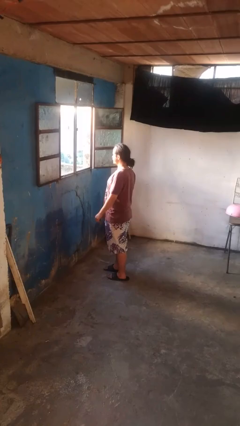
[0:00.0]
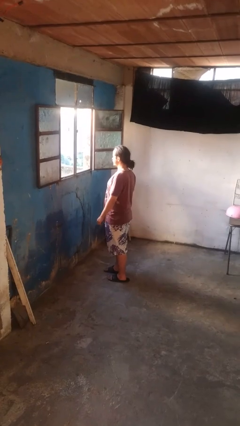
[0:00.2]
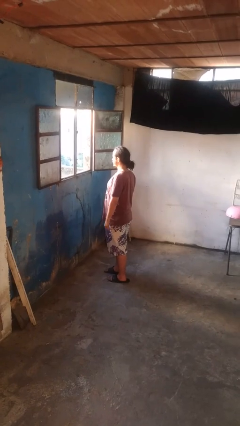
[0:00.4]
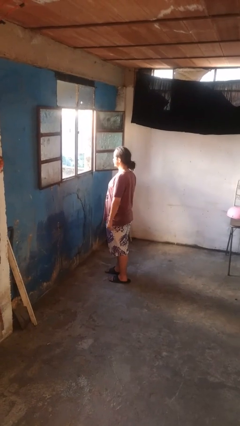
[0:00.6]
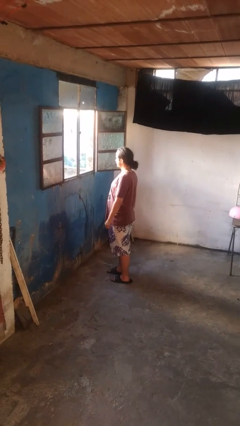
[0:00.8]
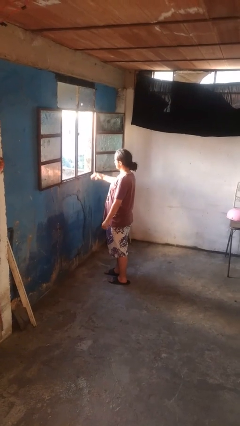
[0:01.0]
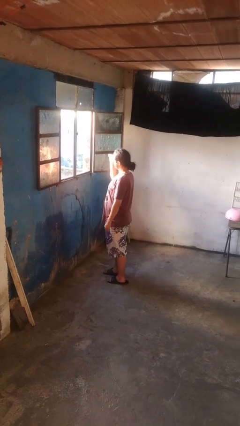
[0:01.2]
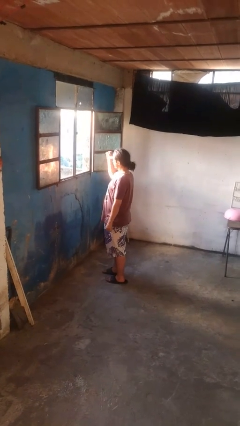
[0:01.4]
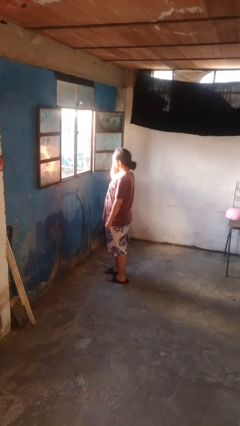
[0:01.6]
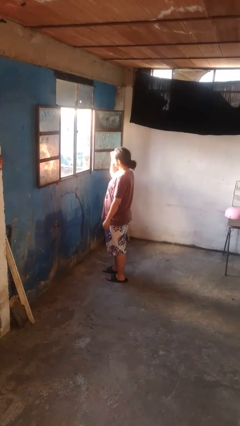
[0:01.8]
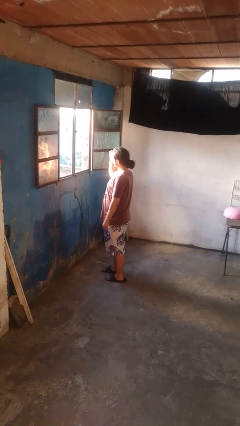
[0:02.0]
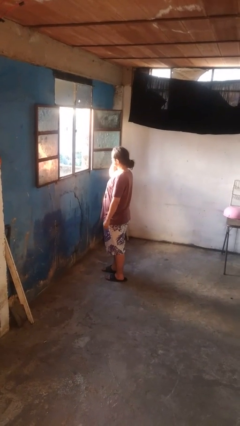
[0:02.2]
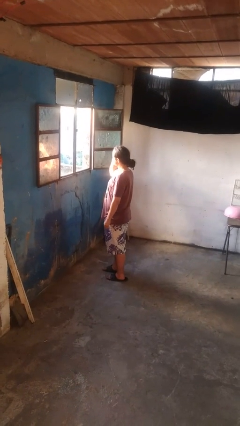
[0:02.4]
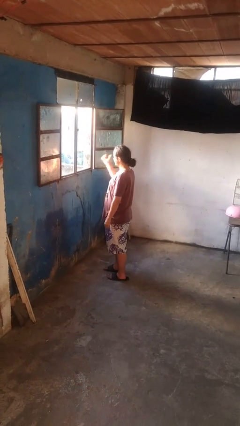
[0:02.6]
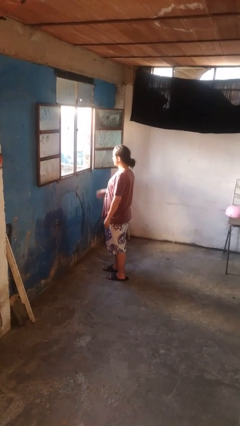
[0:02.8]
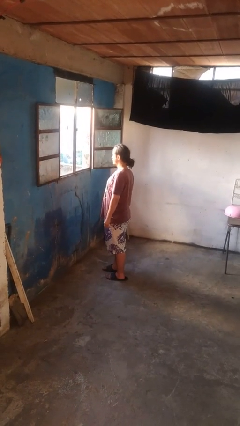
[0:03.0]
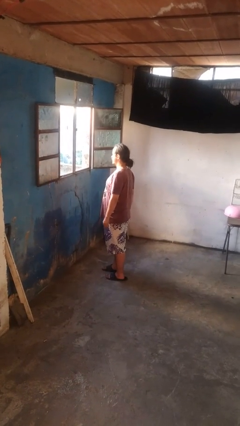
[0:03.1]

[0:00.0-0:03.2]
person gestures behind me

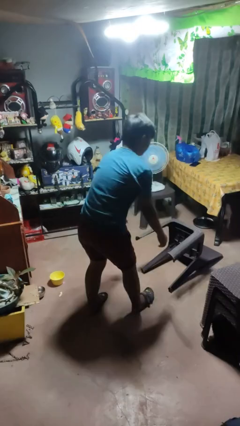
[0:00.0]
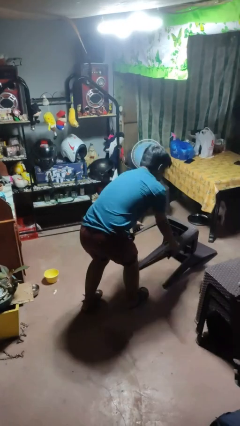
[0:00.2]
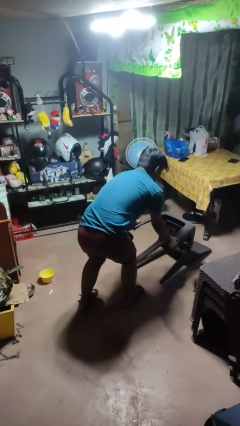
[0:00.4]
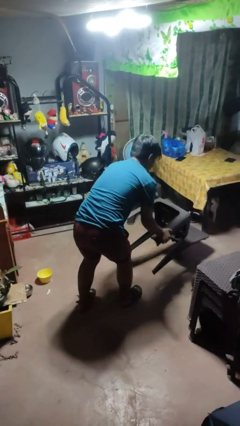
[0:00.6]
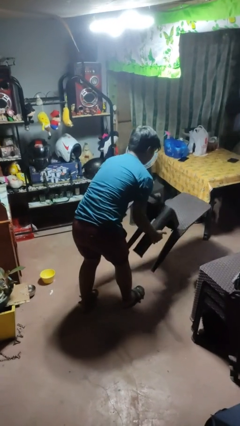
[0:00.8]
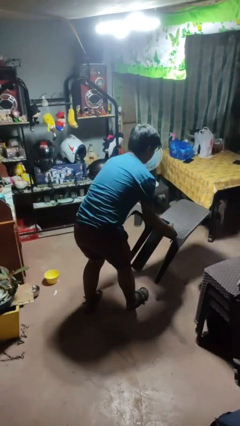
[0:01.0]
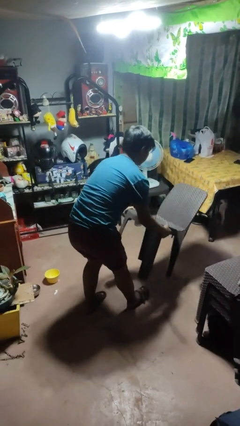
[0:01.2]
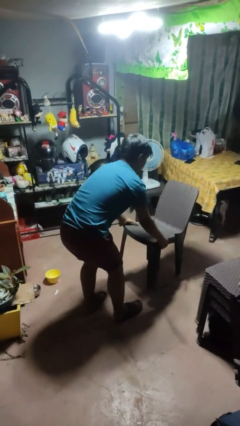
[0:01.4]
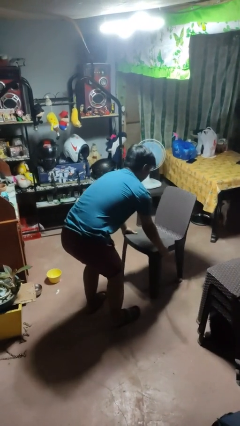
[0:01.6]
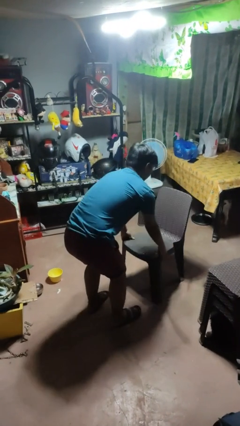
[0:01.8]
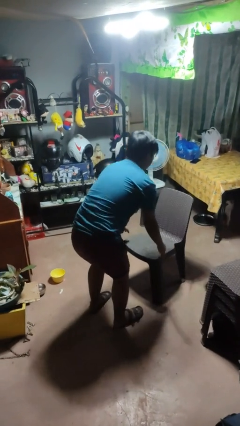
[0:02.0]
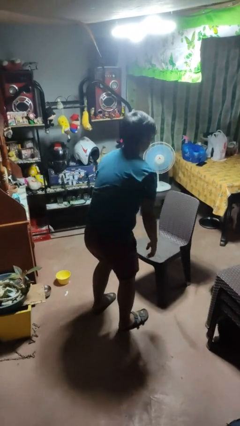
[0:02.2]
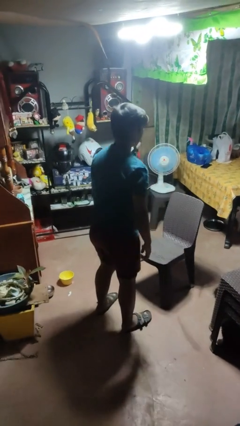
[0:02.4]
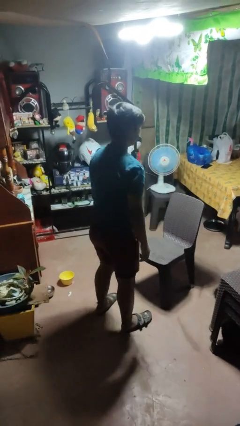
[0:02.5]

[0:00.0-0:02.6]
person sets upright furniture

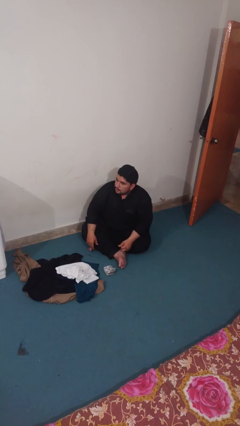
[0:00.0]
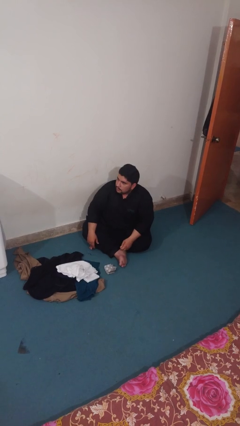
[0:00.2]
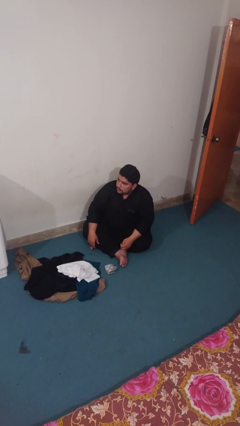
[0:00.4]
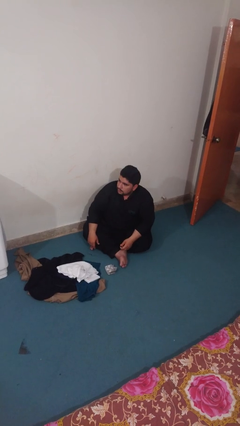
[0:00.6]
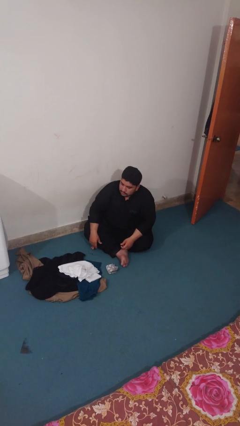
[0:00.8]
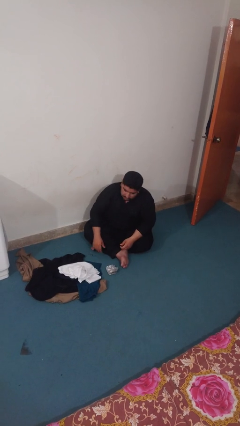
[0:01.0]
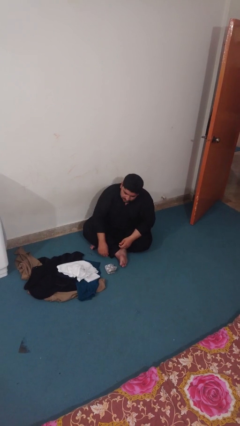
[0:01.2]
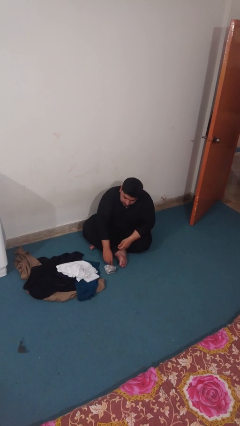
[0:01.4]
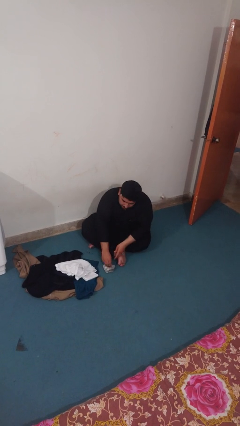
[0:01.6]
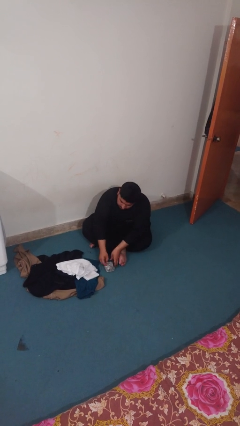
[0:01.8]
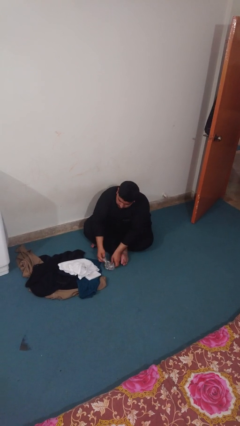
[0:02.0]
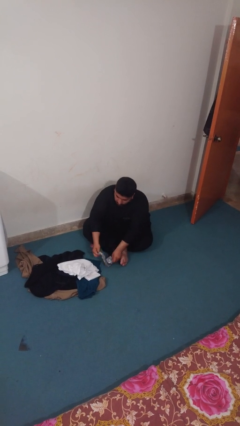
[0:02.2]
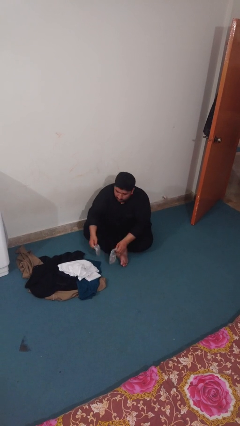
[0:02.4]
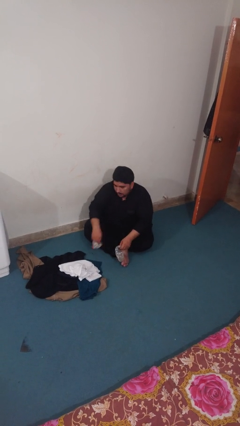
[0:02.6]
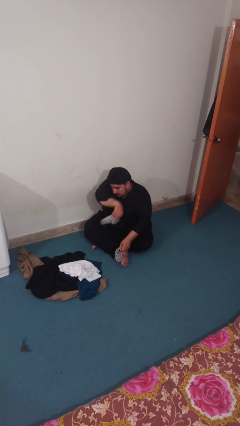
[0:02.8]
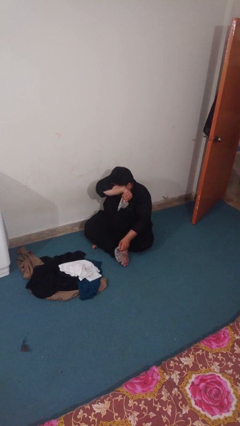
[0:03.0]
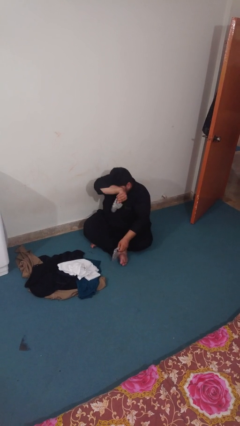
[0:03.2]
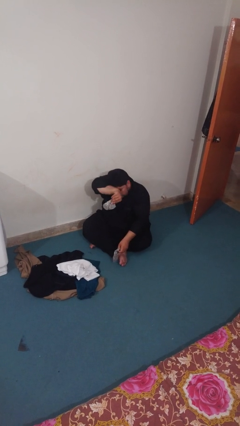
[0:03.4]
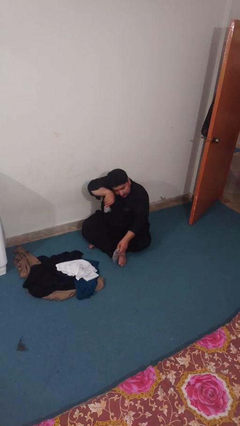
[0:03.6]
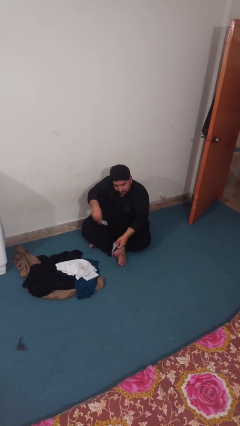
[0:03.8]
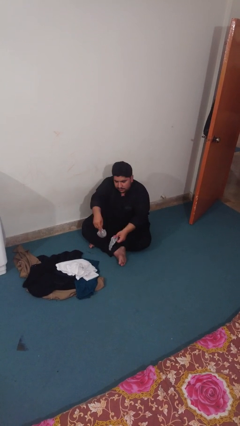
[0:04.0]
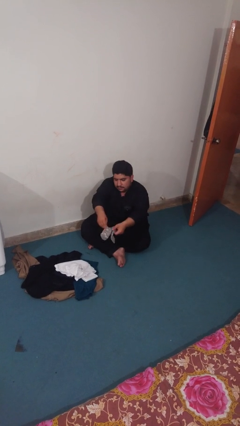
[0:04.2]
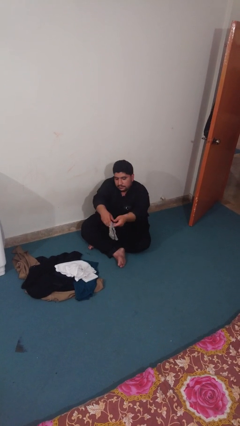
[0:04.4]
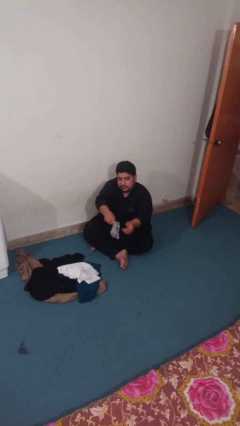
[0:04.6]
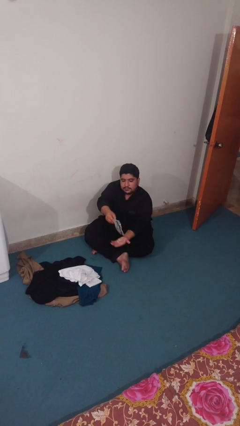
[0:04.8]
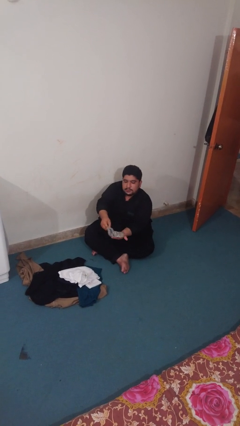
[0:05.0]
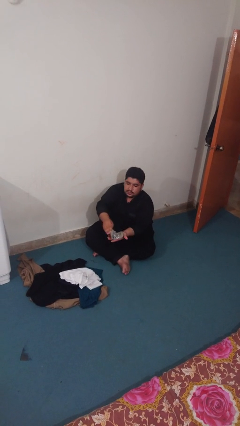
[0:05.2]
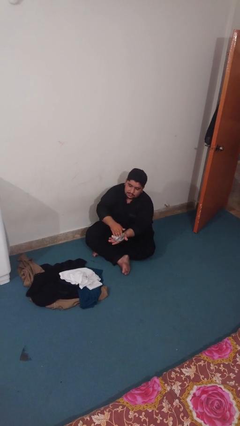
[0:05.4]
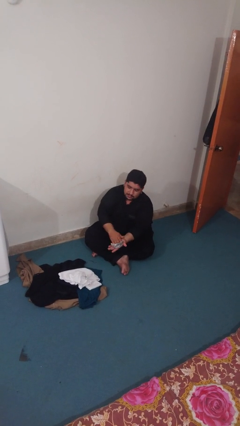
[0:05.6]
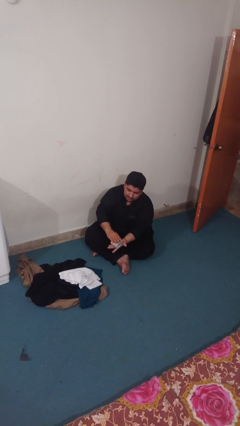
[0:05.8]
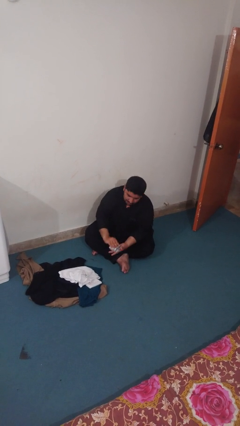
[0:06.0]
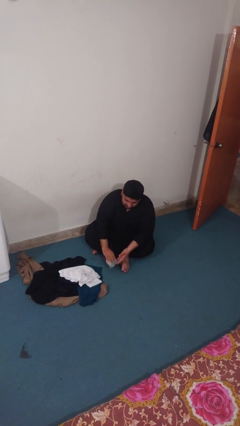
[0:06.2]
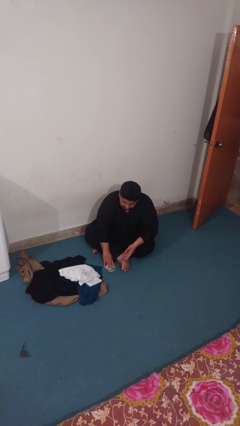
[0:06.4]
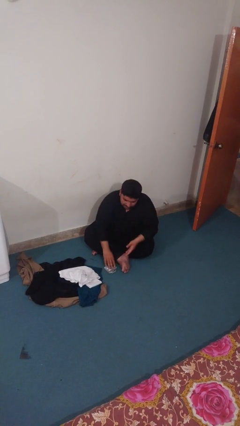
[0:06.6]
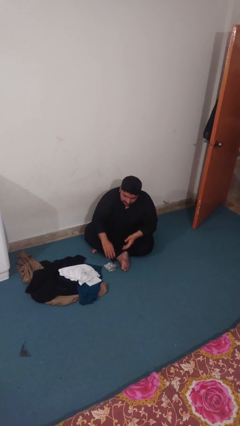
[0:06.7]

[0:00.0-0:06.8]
person folds socks

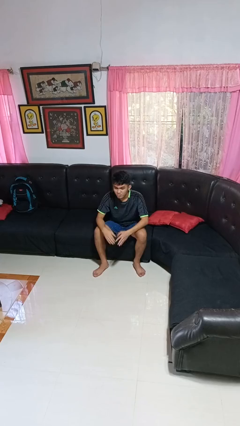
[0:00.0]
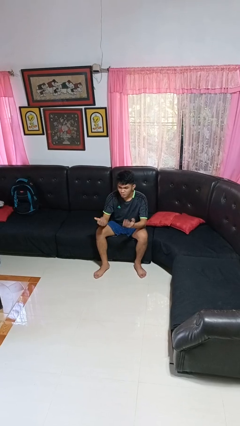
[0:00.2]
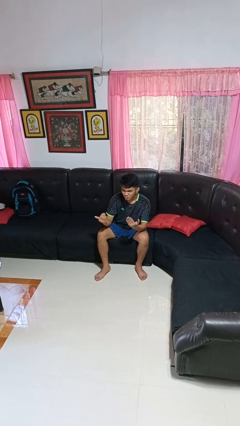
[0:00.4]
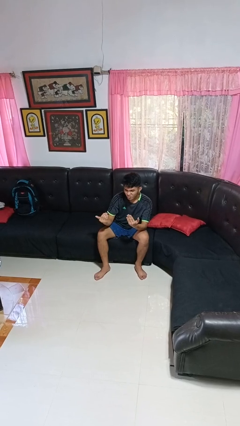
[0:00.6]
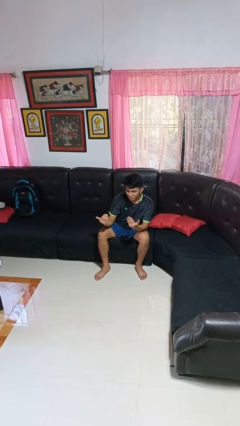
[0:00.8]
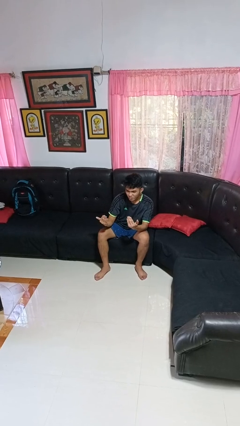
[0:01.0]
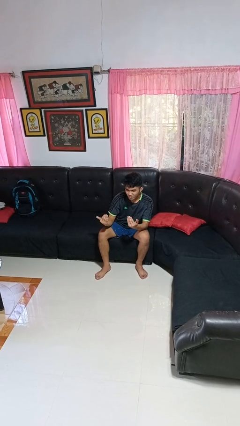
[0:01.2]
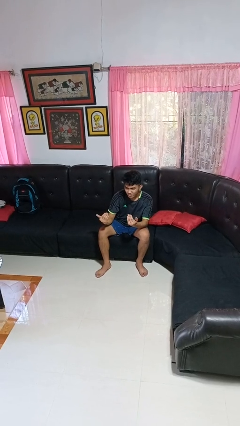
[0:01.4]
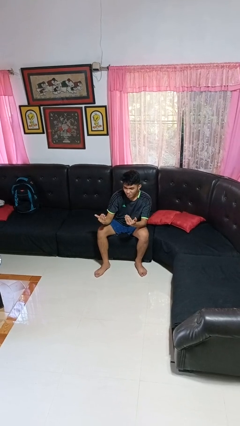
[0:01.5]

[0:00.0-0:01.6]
person gestures come here

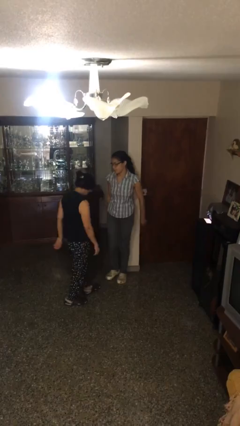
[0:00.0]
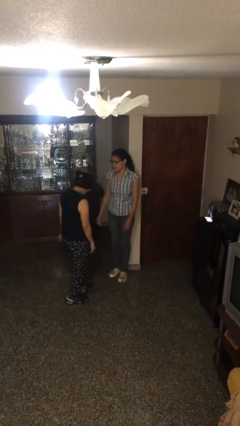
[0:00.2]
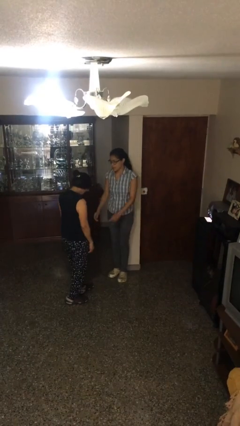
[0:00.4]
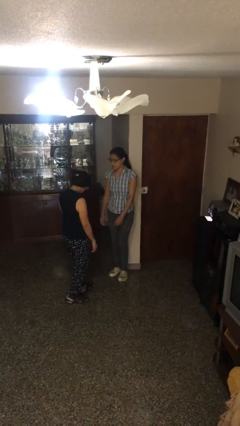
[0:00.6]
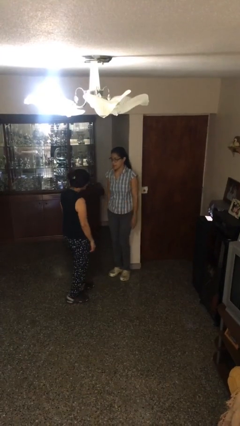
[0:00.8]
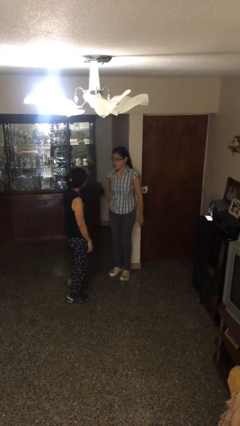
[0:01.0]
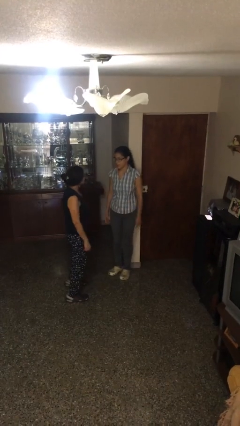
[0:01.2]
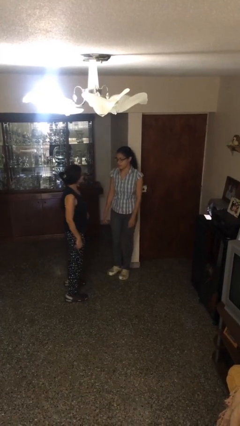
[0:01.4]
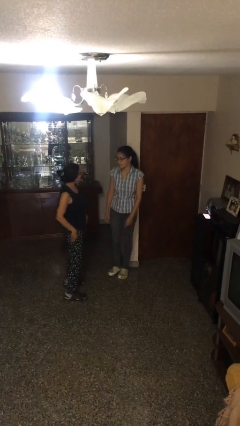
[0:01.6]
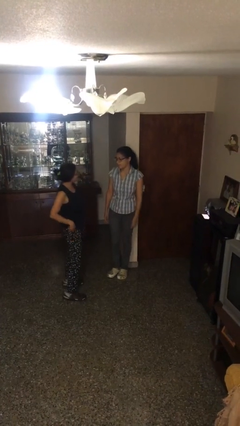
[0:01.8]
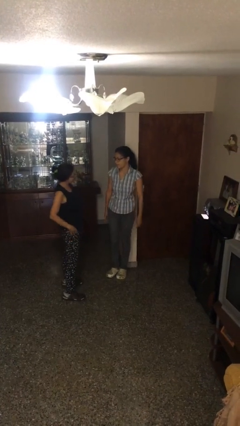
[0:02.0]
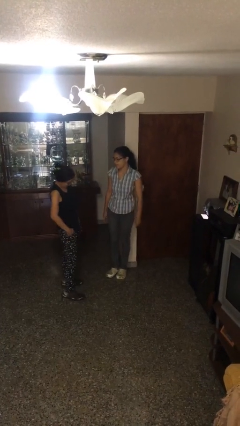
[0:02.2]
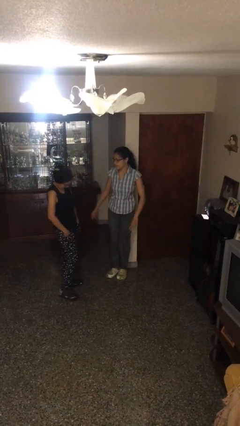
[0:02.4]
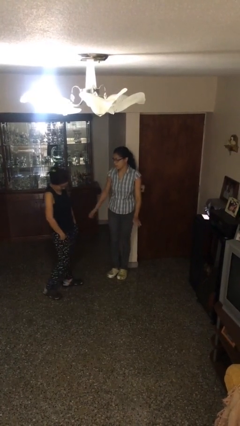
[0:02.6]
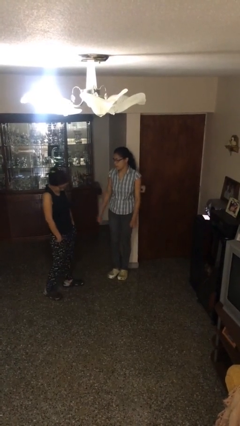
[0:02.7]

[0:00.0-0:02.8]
person talks to person

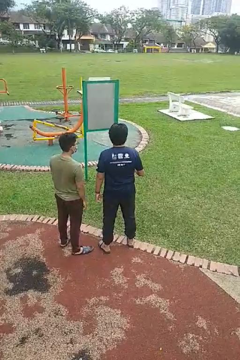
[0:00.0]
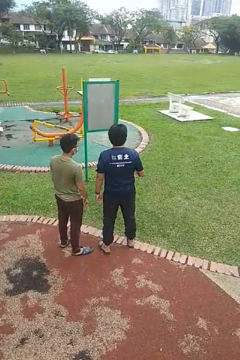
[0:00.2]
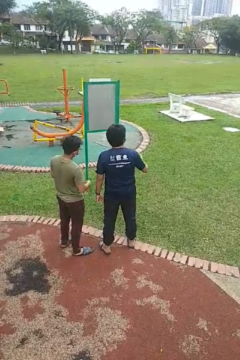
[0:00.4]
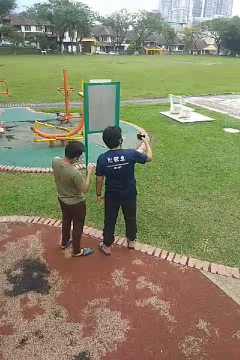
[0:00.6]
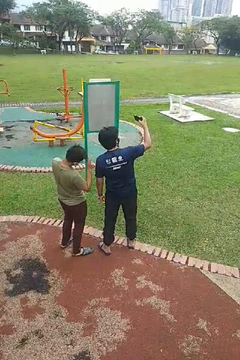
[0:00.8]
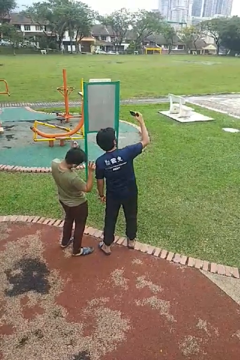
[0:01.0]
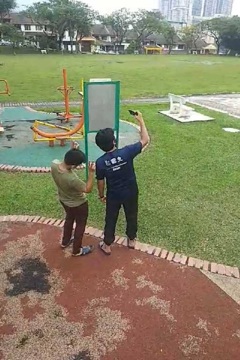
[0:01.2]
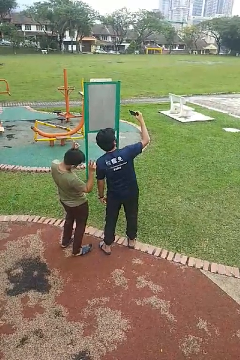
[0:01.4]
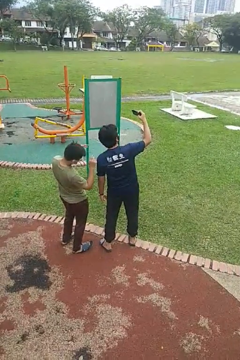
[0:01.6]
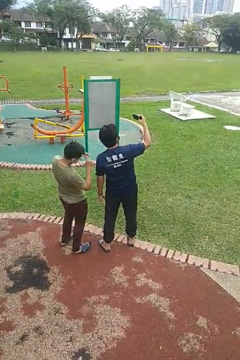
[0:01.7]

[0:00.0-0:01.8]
person takes selfie with person